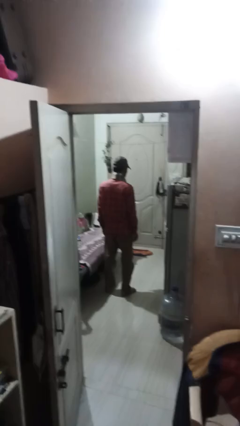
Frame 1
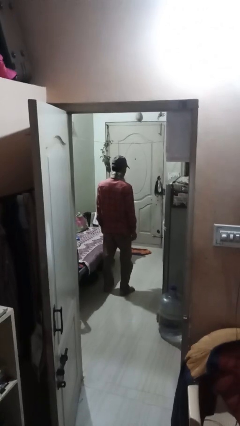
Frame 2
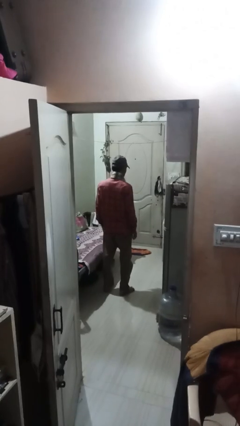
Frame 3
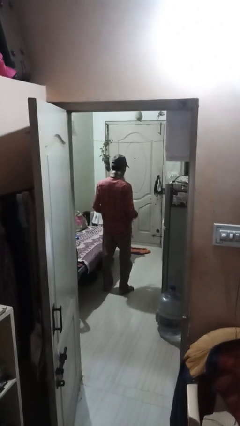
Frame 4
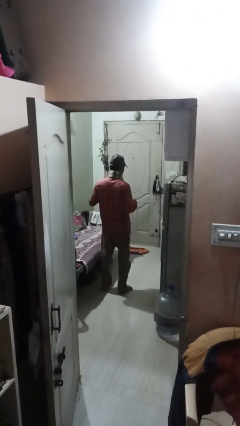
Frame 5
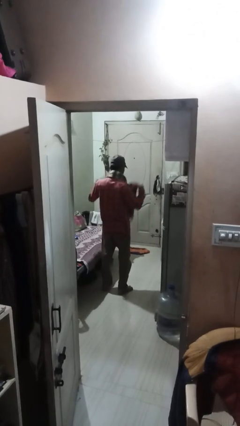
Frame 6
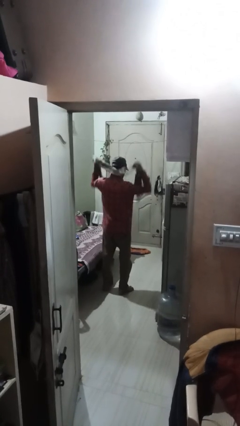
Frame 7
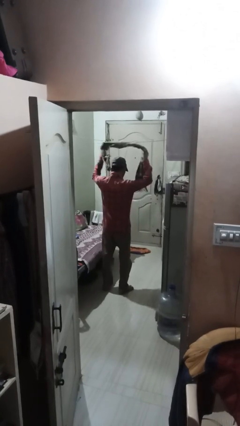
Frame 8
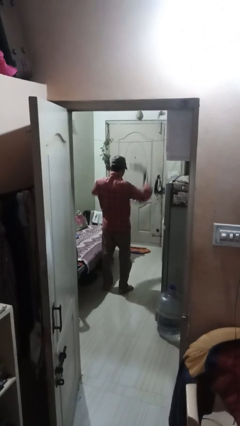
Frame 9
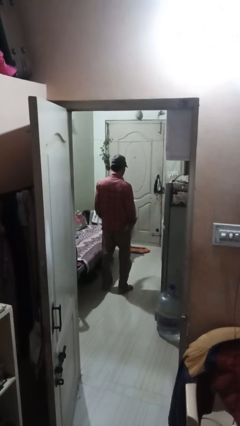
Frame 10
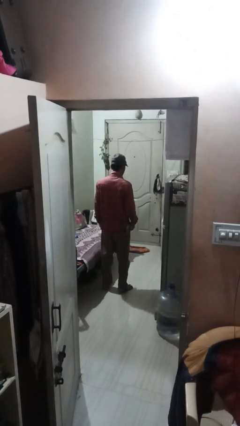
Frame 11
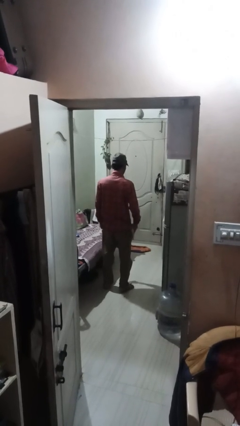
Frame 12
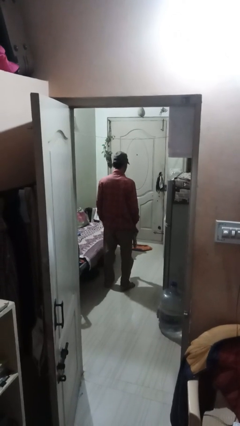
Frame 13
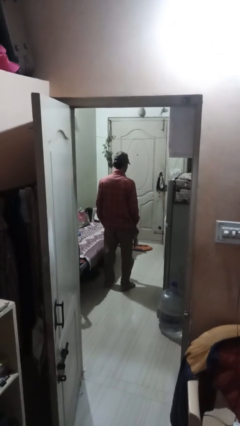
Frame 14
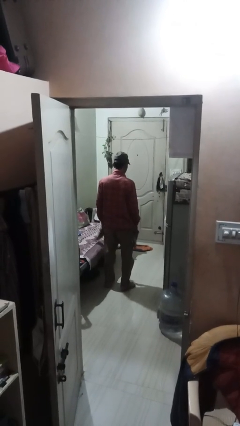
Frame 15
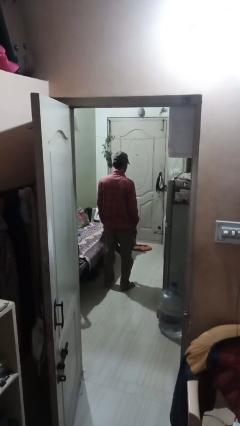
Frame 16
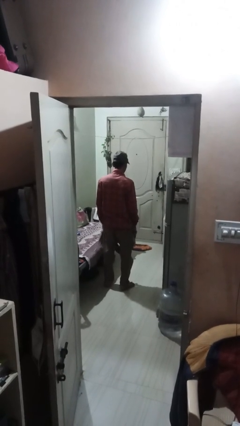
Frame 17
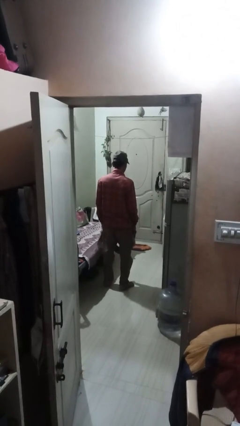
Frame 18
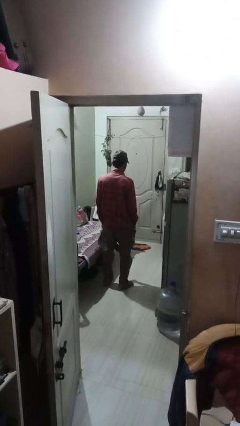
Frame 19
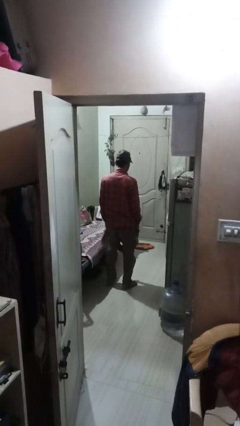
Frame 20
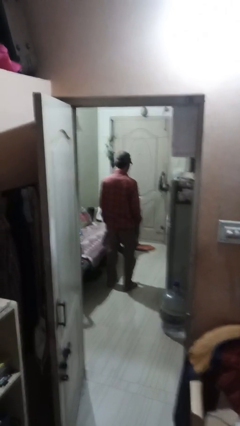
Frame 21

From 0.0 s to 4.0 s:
person takes off scarf

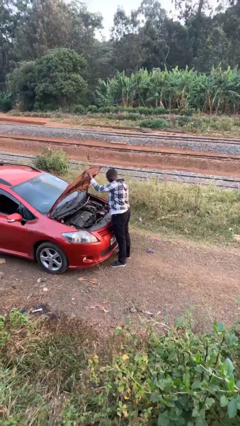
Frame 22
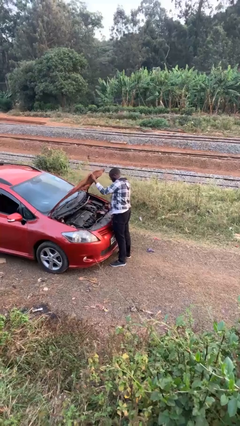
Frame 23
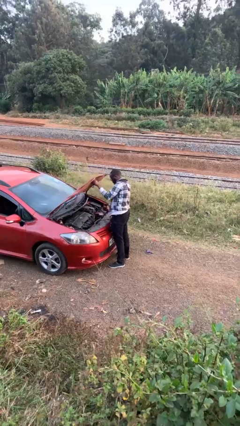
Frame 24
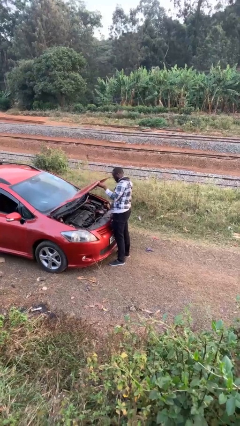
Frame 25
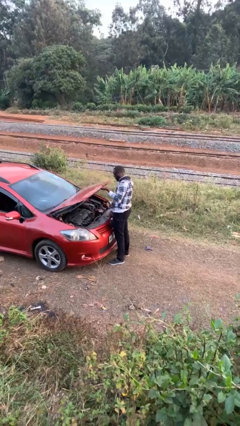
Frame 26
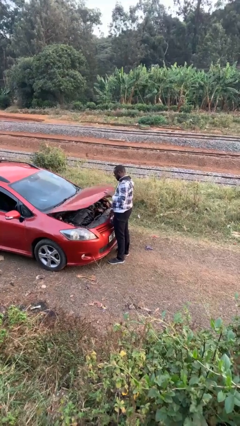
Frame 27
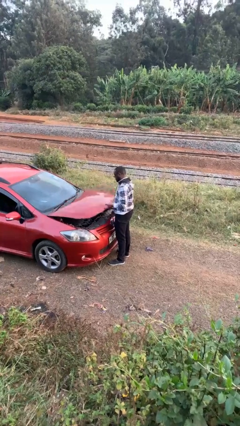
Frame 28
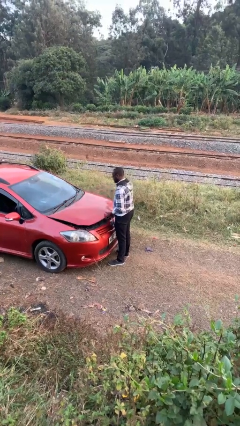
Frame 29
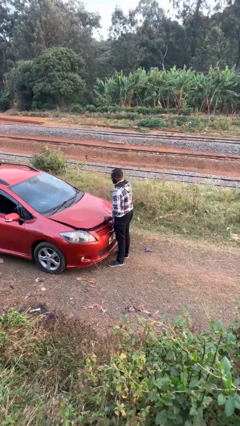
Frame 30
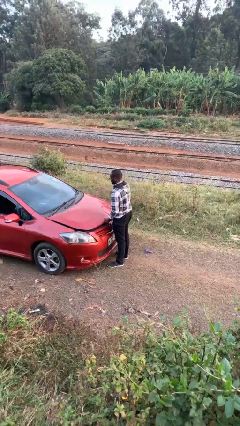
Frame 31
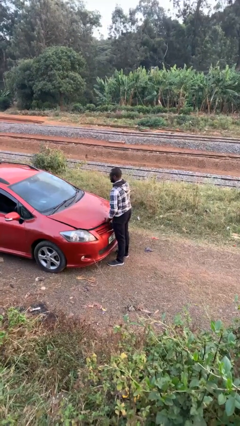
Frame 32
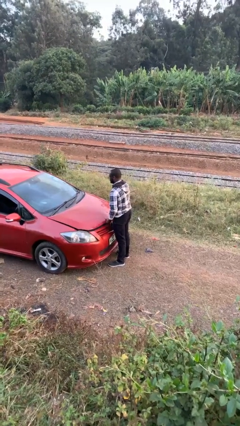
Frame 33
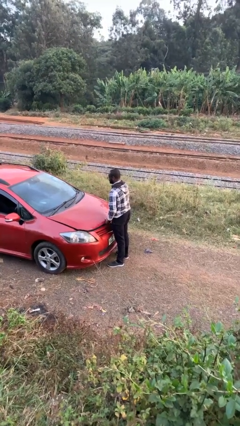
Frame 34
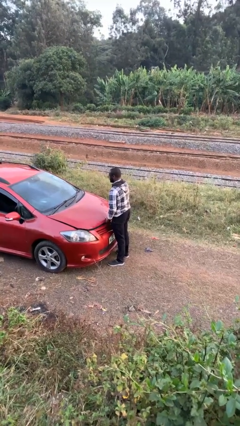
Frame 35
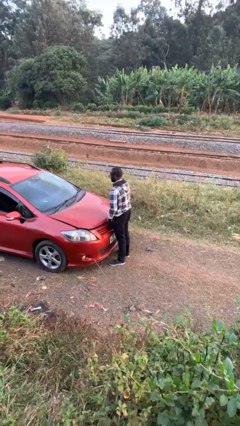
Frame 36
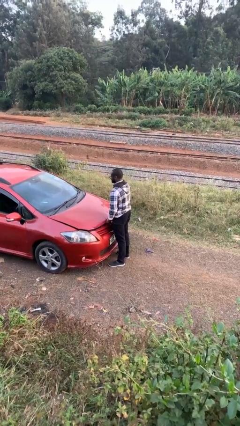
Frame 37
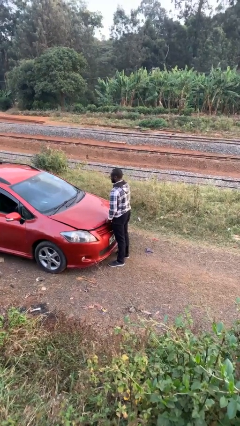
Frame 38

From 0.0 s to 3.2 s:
person closes car hood

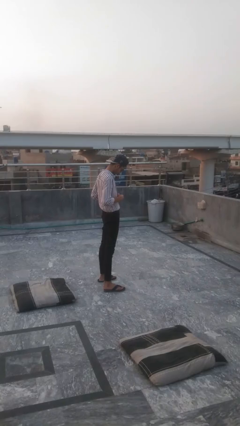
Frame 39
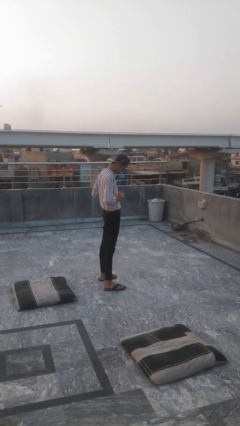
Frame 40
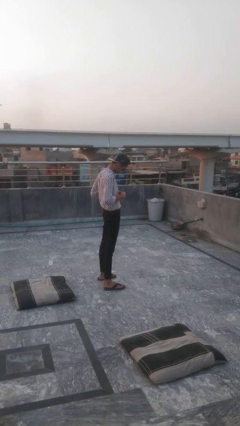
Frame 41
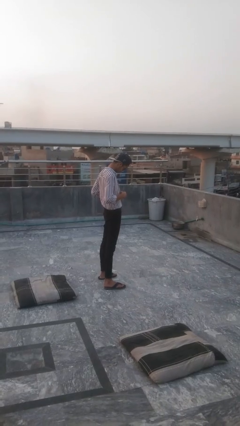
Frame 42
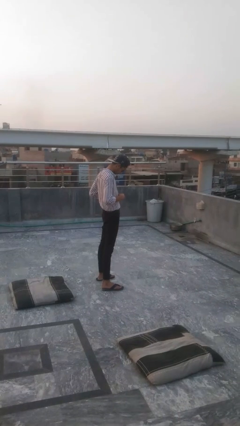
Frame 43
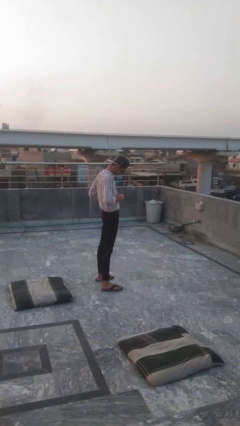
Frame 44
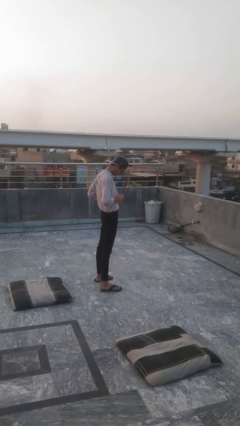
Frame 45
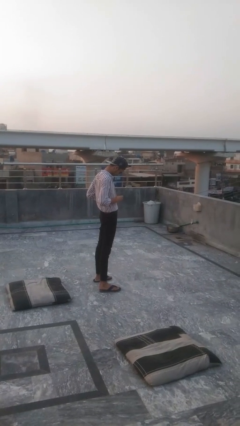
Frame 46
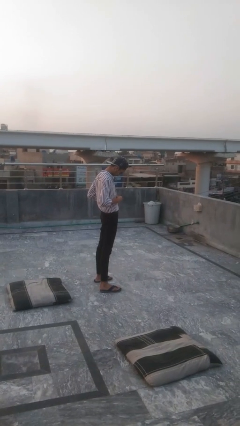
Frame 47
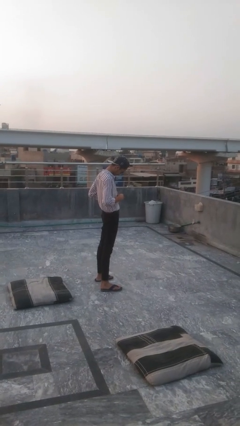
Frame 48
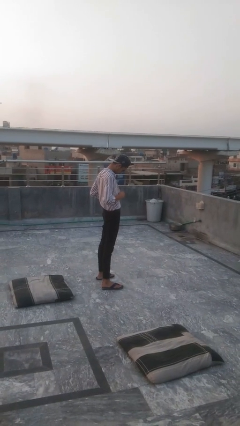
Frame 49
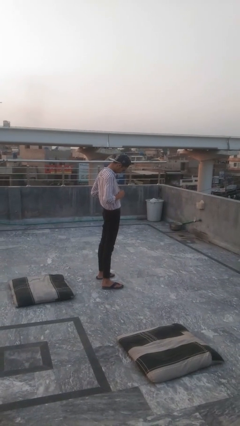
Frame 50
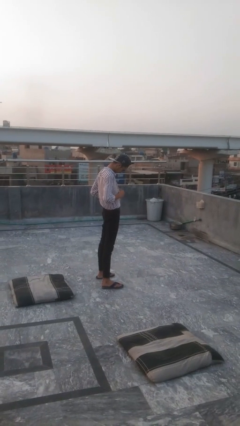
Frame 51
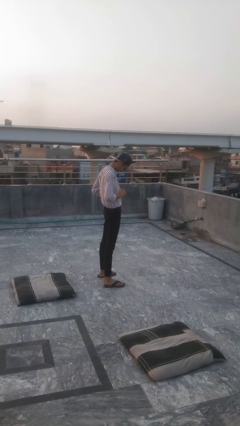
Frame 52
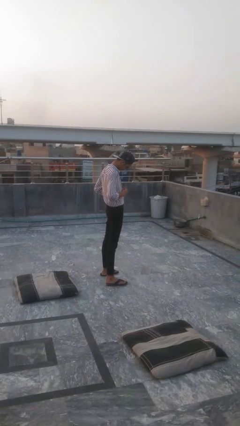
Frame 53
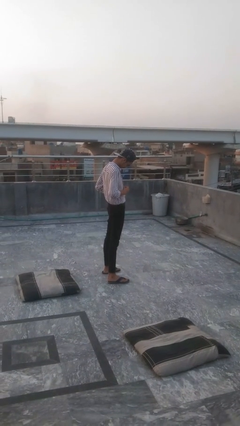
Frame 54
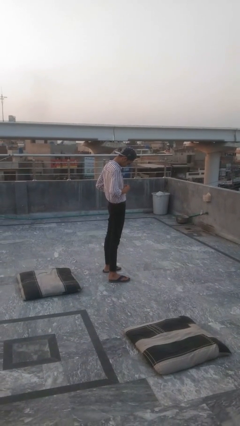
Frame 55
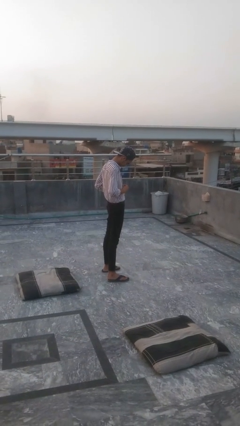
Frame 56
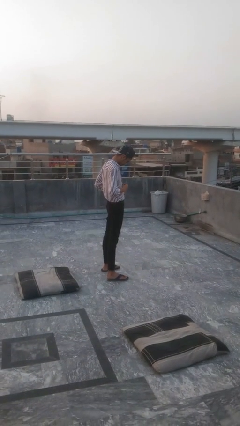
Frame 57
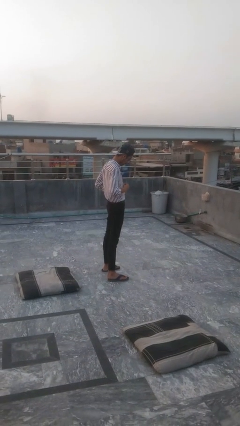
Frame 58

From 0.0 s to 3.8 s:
person buttons shirt

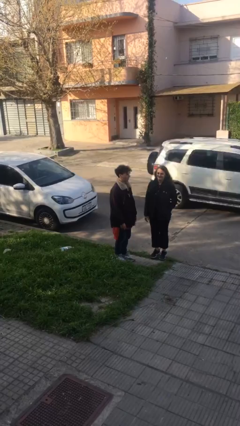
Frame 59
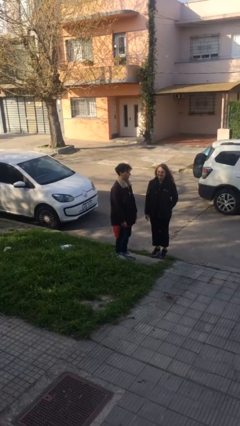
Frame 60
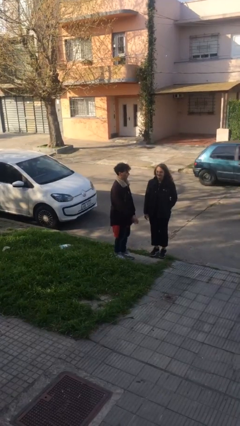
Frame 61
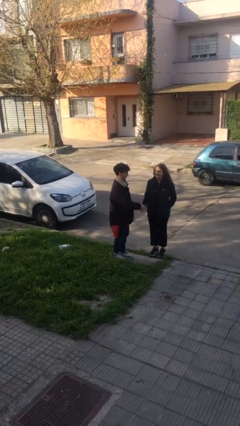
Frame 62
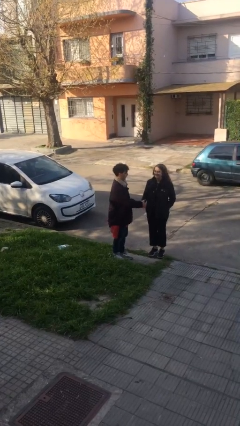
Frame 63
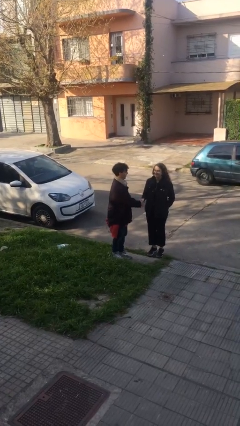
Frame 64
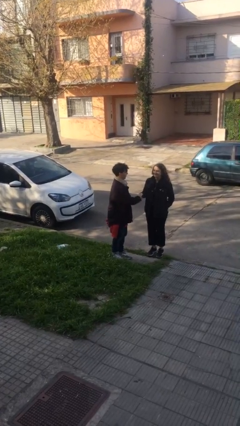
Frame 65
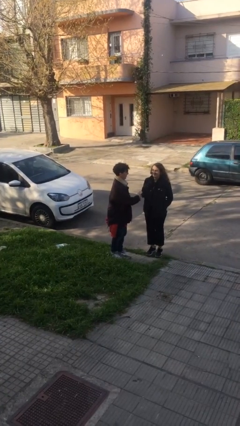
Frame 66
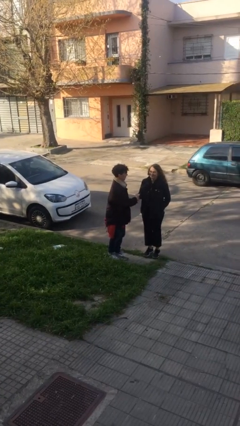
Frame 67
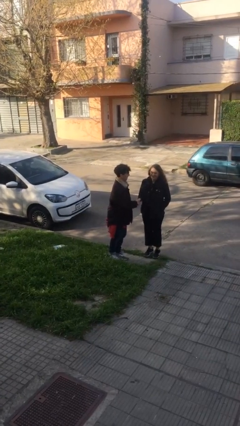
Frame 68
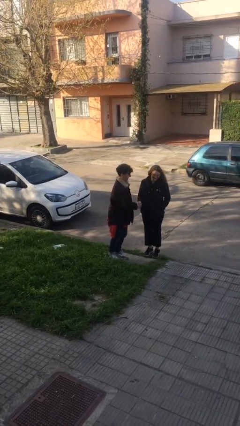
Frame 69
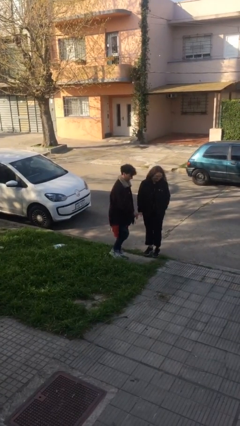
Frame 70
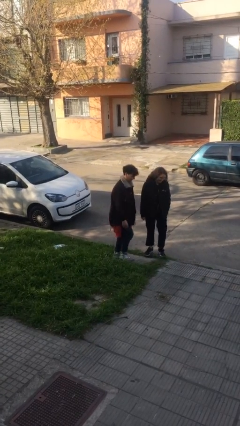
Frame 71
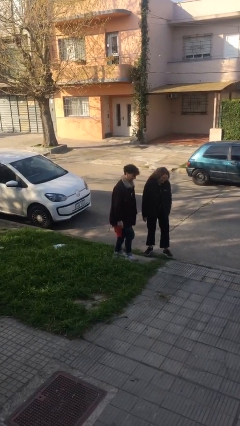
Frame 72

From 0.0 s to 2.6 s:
person shakes hand

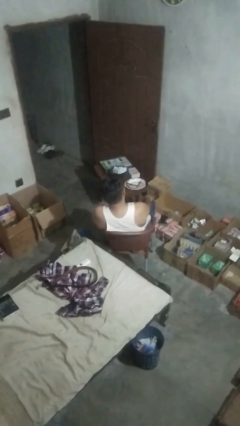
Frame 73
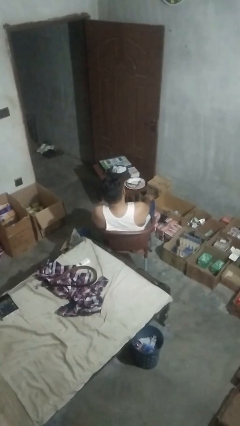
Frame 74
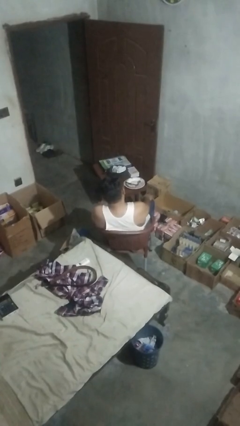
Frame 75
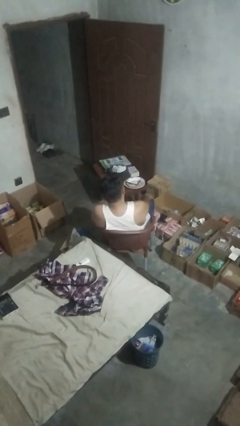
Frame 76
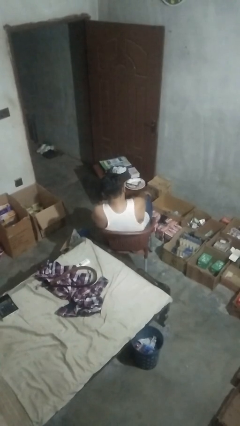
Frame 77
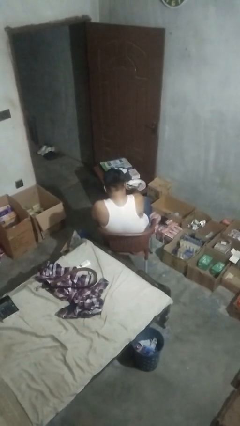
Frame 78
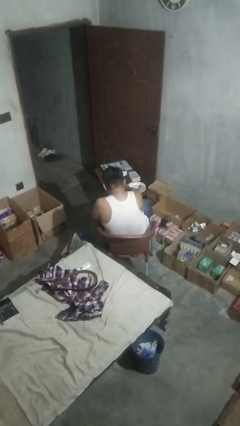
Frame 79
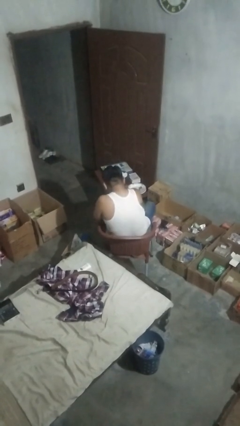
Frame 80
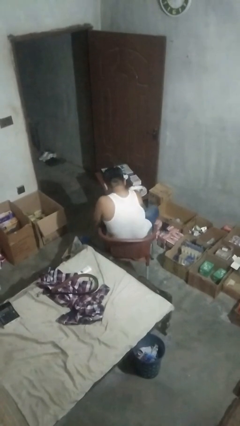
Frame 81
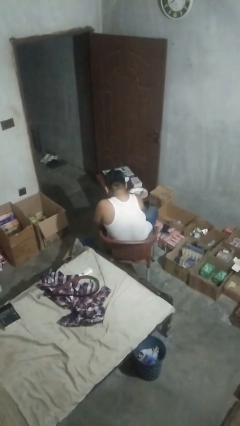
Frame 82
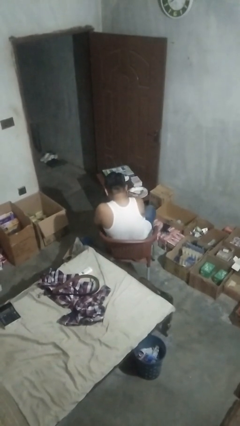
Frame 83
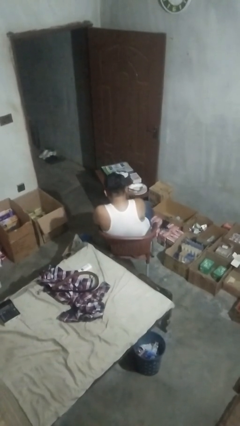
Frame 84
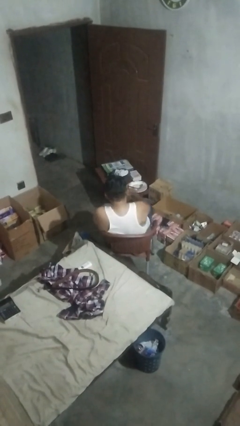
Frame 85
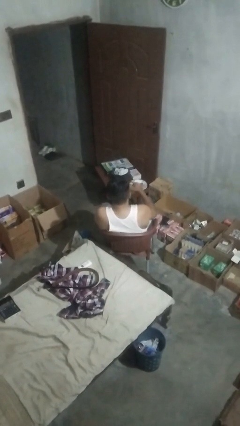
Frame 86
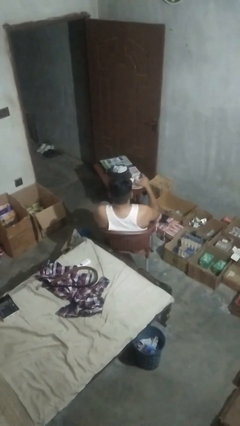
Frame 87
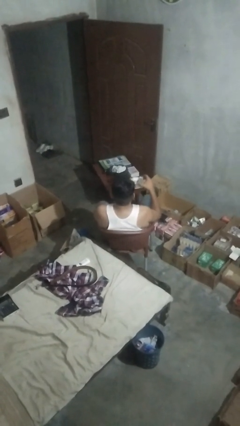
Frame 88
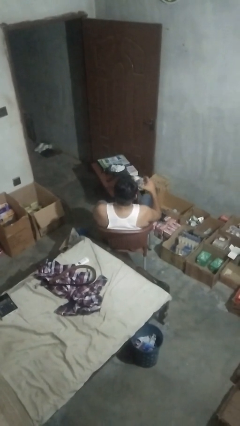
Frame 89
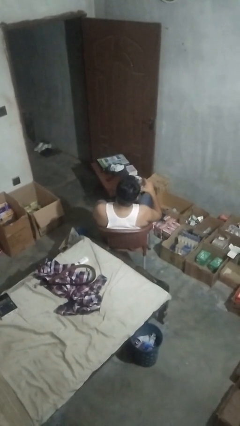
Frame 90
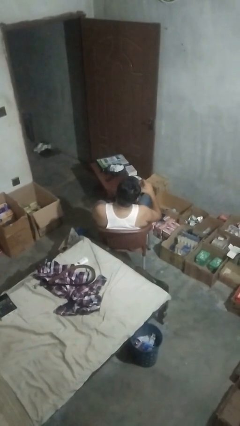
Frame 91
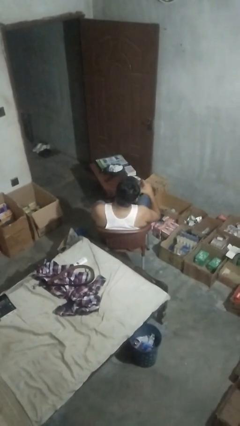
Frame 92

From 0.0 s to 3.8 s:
person picks up object from table
